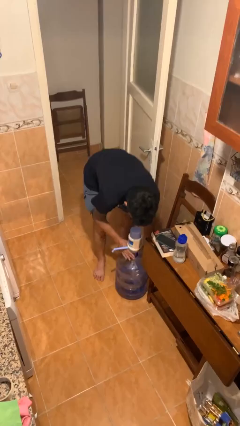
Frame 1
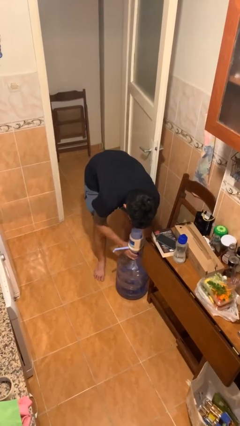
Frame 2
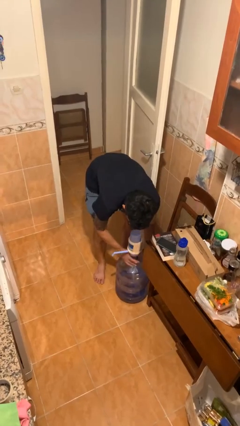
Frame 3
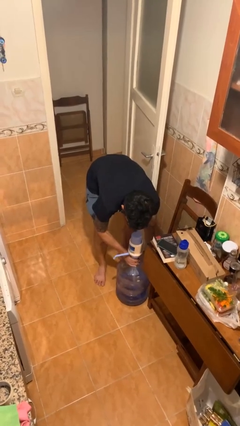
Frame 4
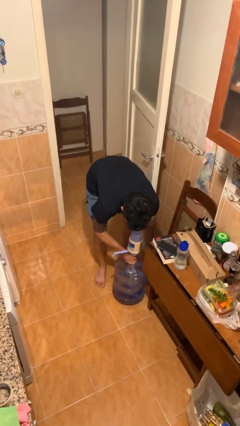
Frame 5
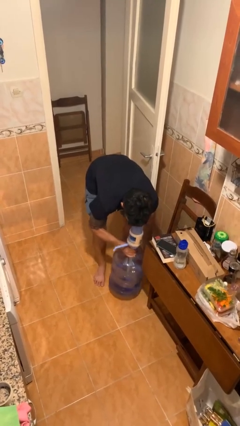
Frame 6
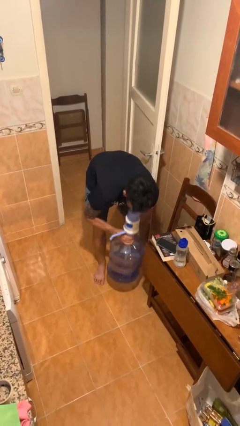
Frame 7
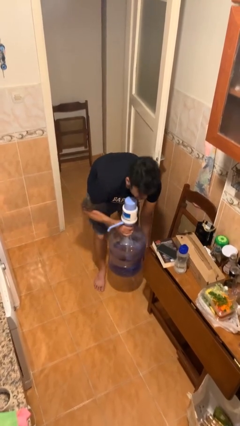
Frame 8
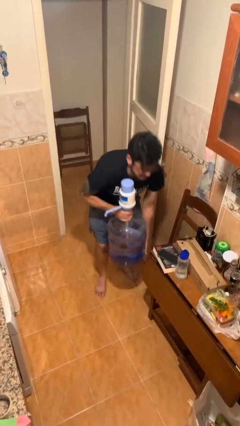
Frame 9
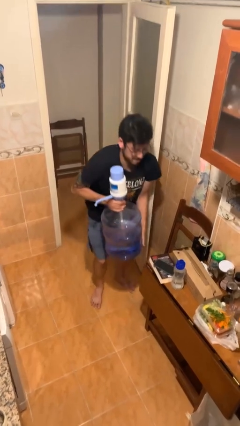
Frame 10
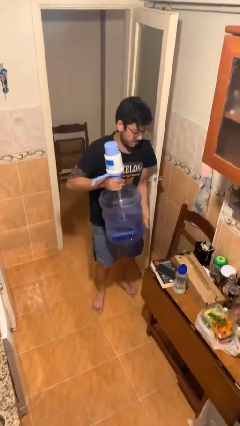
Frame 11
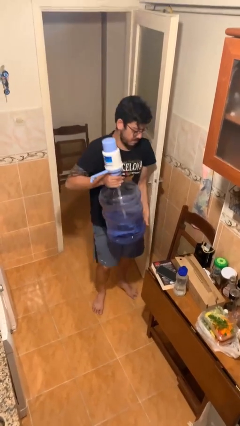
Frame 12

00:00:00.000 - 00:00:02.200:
person picks up object from floor

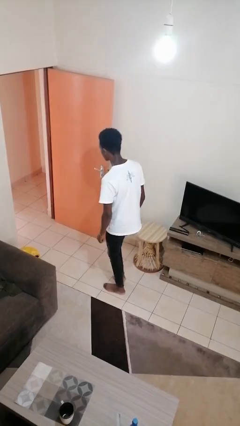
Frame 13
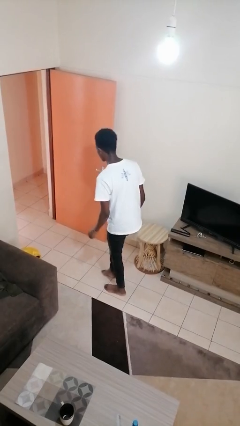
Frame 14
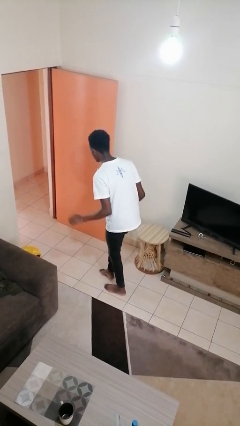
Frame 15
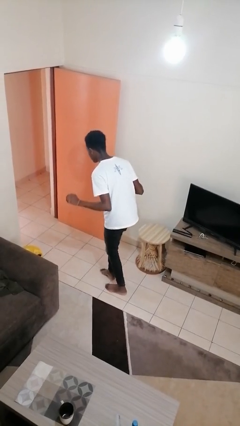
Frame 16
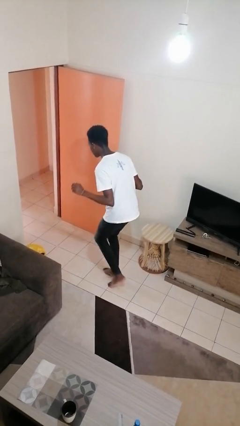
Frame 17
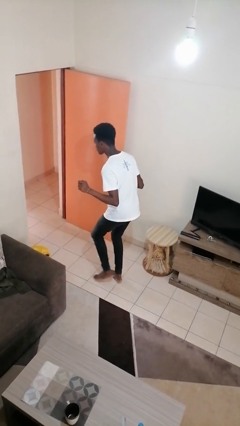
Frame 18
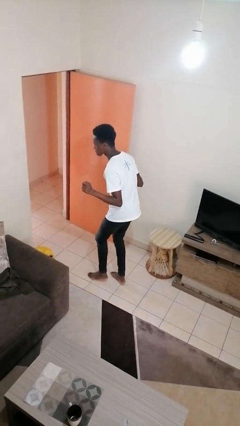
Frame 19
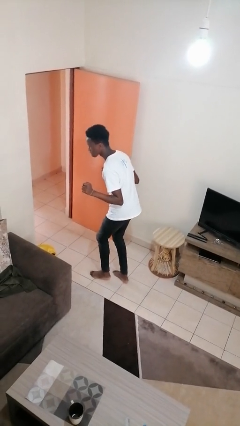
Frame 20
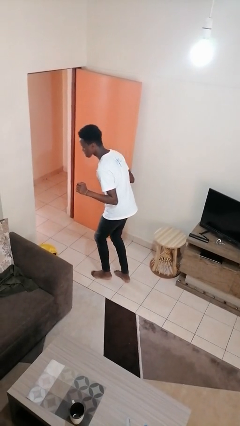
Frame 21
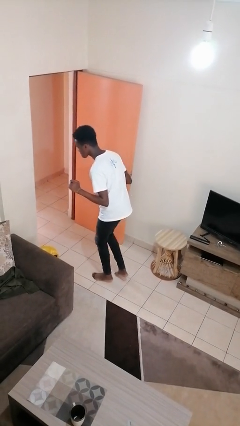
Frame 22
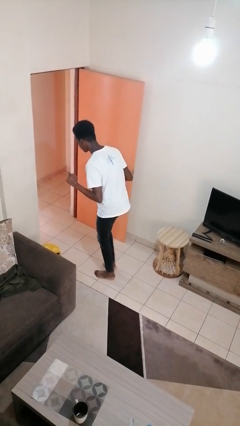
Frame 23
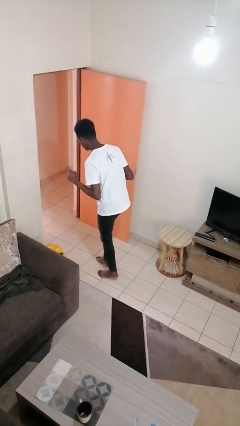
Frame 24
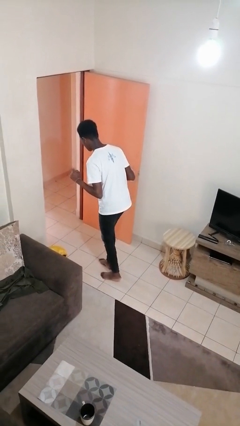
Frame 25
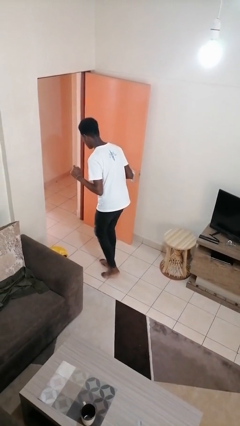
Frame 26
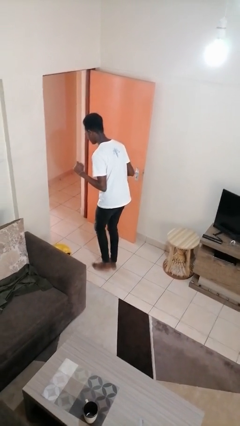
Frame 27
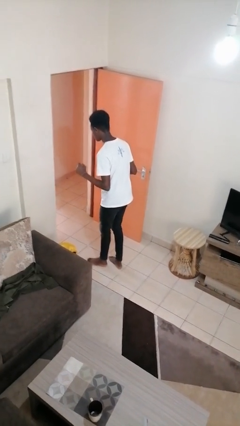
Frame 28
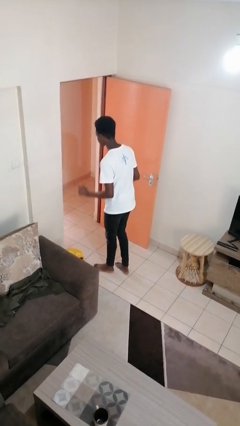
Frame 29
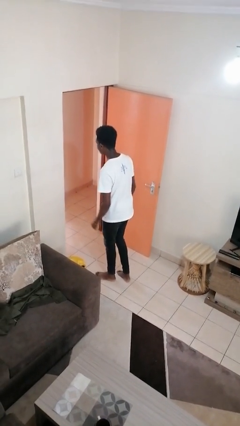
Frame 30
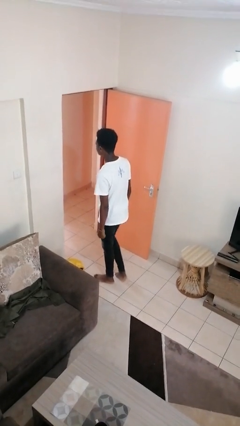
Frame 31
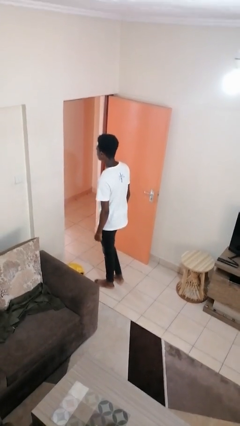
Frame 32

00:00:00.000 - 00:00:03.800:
person walks tiptoe

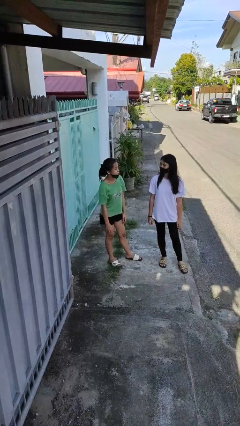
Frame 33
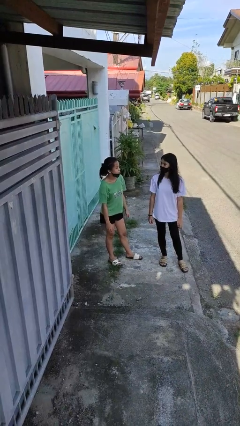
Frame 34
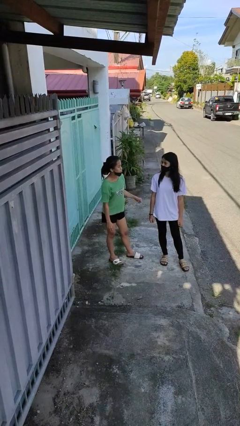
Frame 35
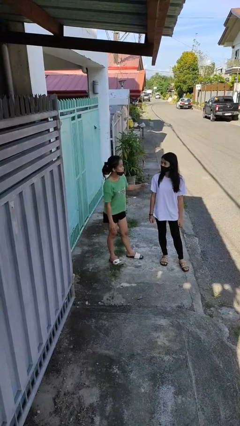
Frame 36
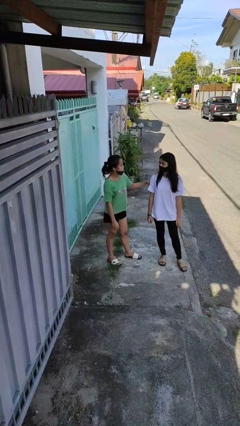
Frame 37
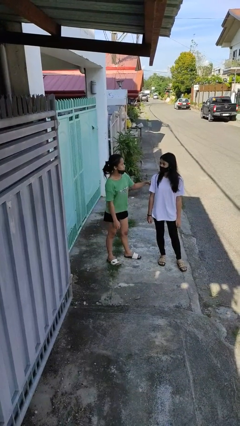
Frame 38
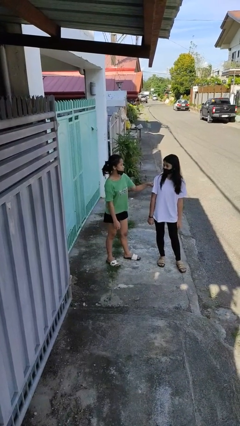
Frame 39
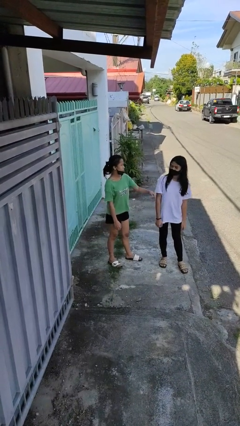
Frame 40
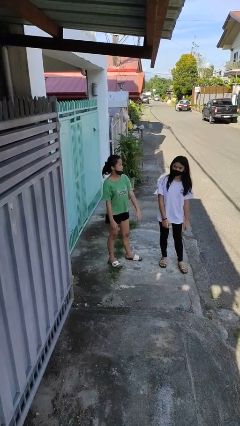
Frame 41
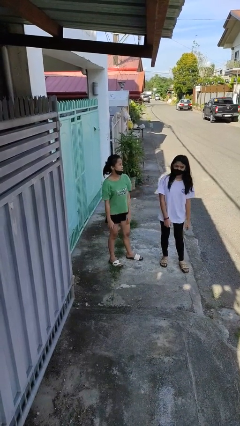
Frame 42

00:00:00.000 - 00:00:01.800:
person pounds shoulders of person

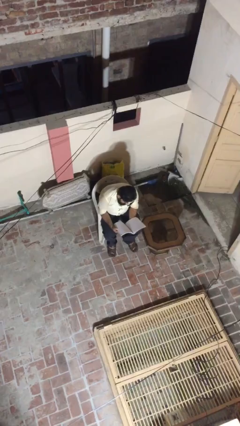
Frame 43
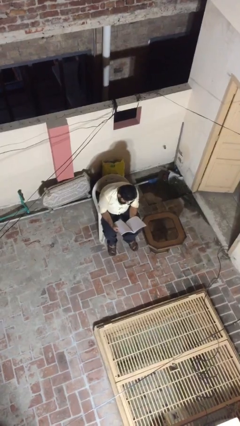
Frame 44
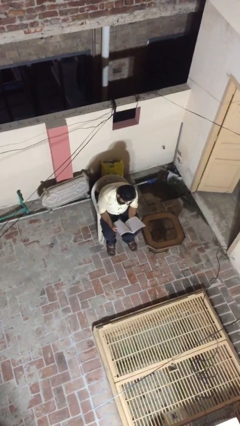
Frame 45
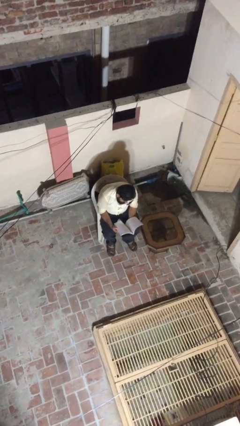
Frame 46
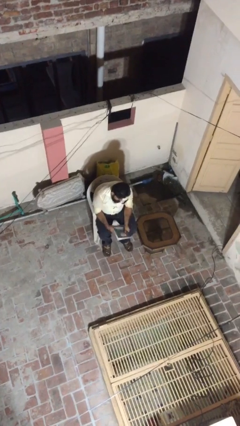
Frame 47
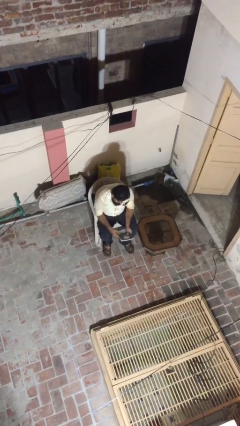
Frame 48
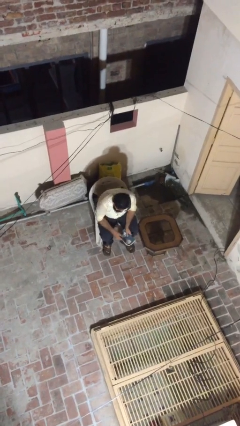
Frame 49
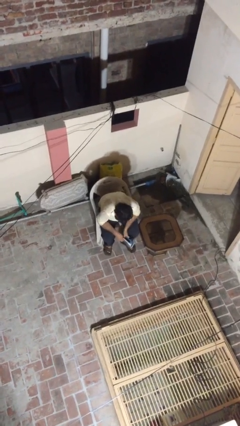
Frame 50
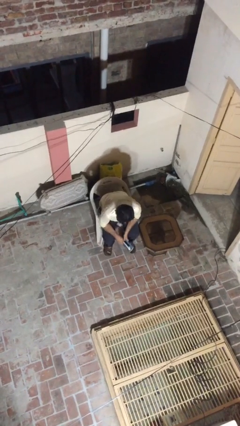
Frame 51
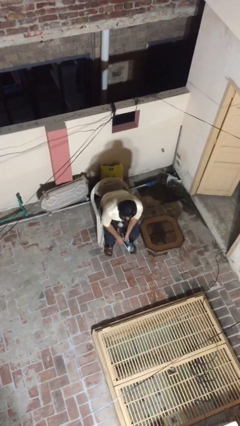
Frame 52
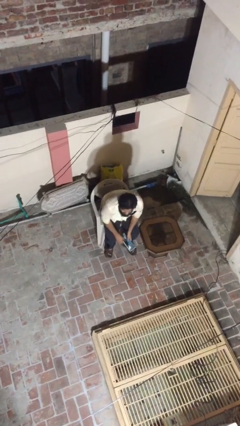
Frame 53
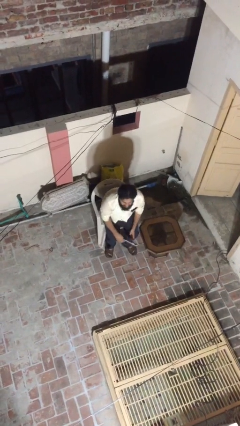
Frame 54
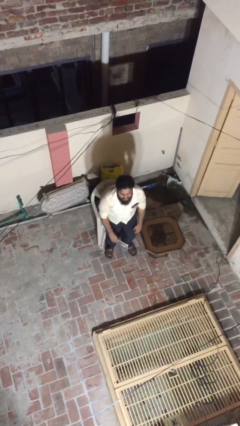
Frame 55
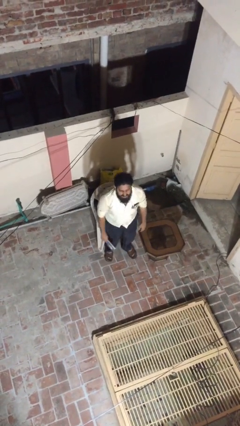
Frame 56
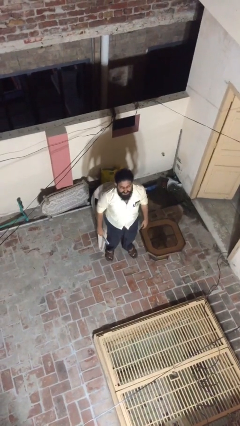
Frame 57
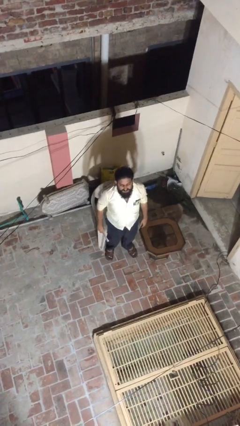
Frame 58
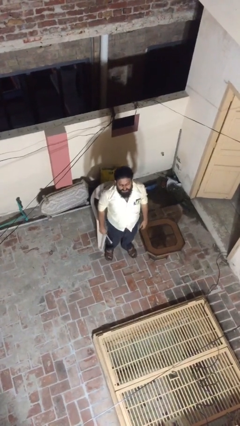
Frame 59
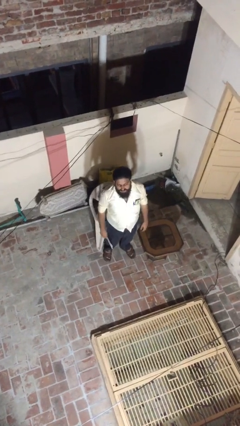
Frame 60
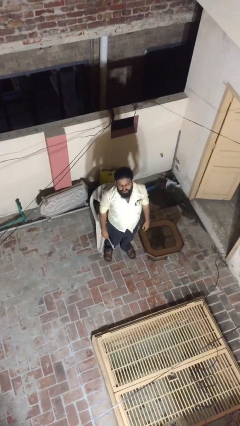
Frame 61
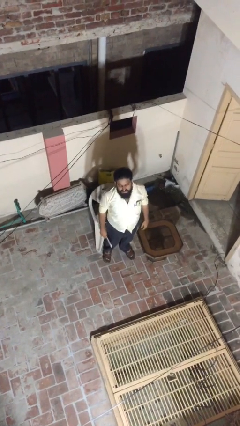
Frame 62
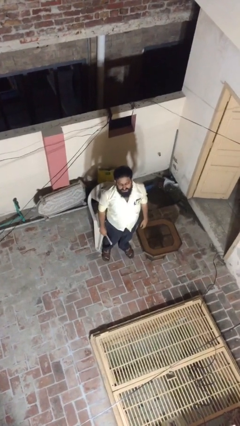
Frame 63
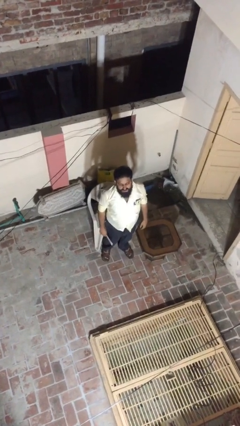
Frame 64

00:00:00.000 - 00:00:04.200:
person stands up

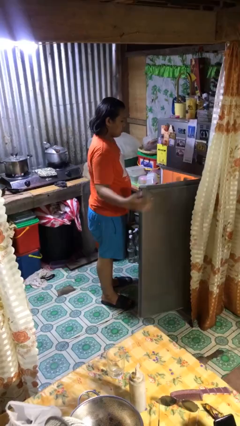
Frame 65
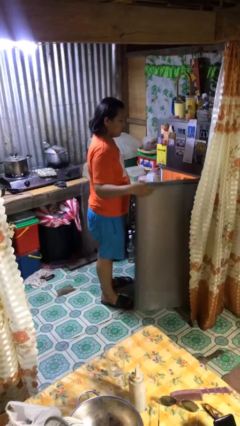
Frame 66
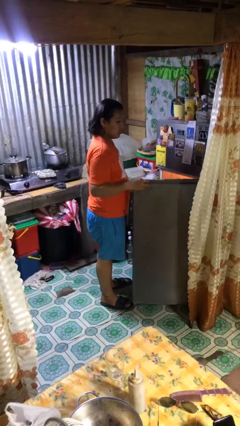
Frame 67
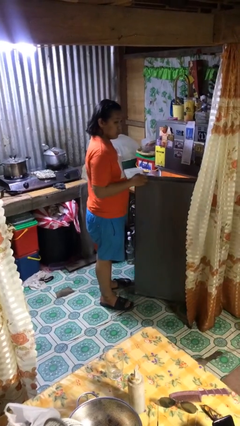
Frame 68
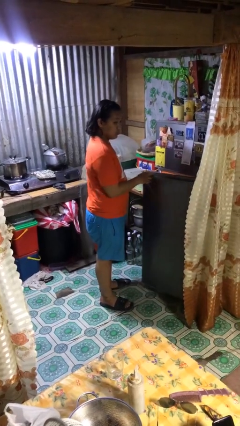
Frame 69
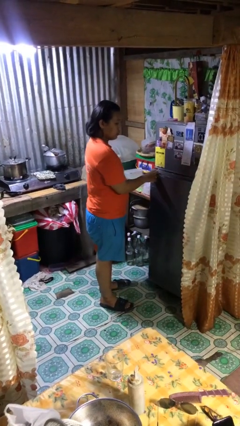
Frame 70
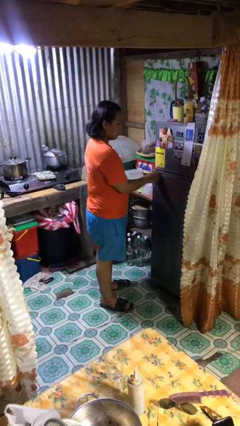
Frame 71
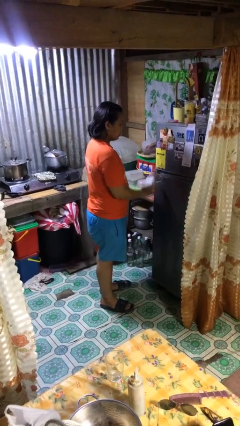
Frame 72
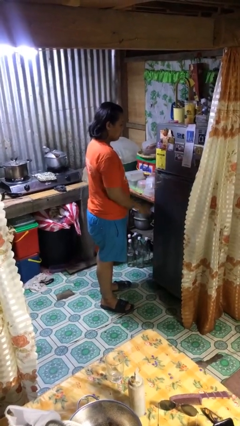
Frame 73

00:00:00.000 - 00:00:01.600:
person closes refrigerator

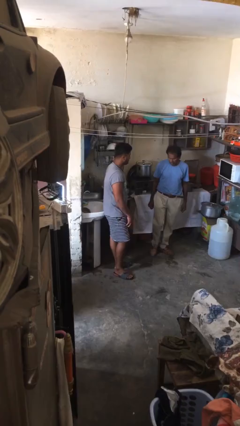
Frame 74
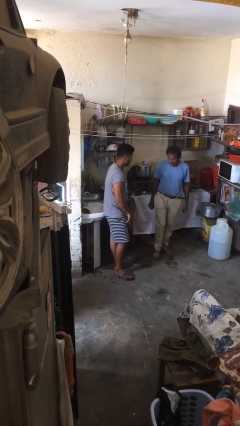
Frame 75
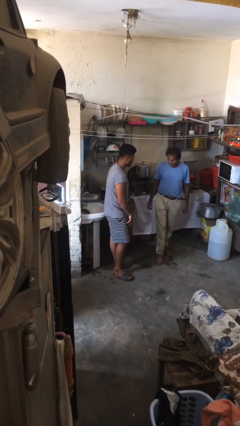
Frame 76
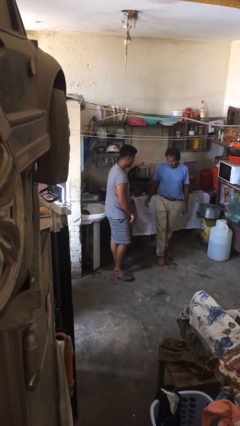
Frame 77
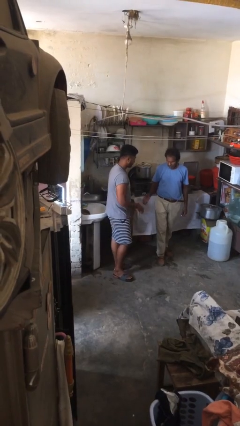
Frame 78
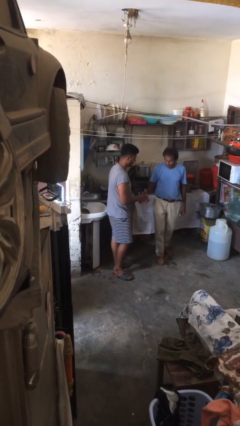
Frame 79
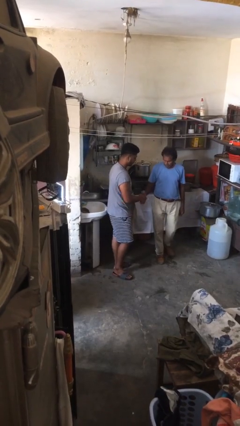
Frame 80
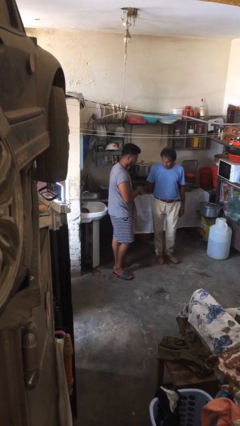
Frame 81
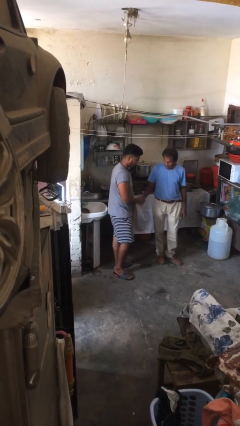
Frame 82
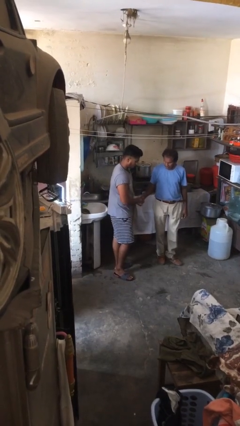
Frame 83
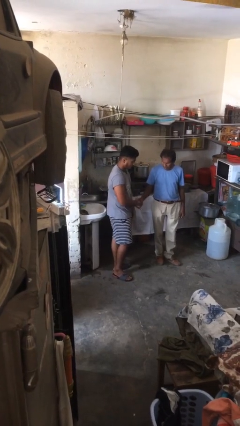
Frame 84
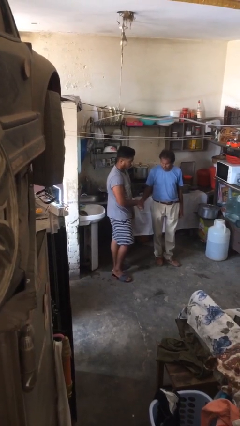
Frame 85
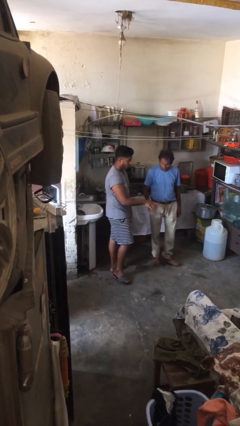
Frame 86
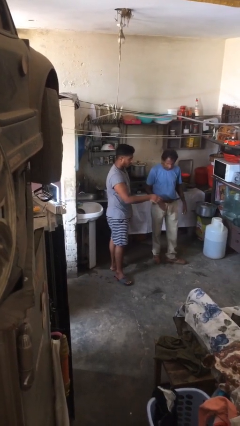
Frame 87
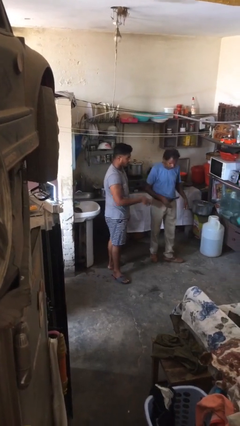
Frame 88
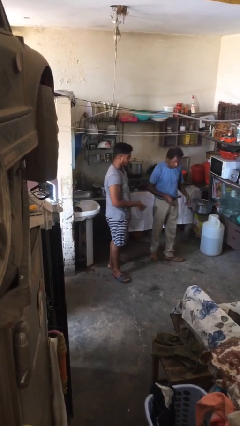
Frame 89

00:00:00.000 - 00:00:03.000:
person shakes hand

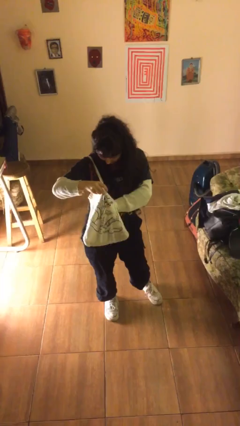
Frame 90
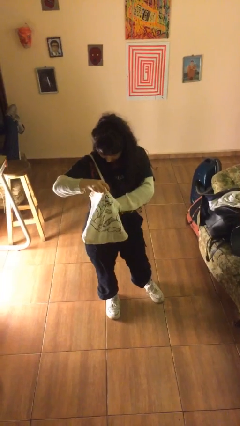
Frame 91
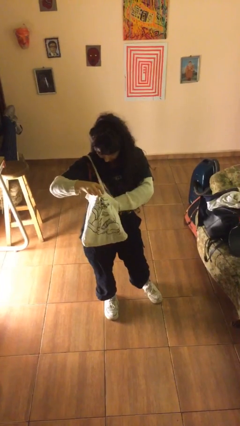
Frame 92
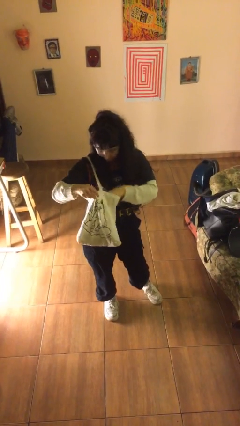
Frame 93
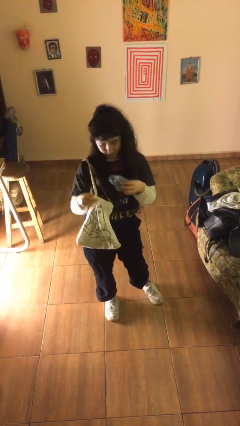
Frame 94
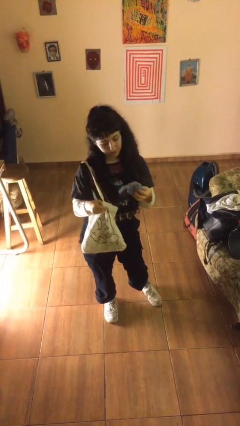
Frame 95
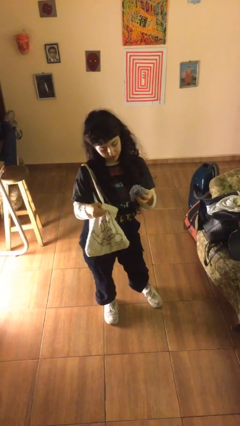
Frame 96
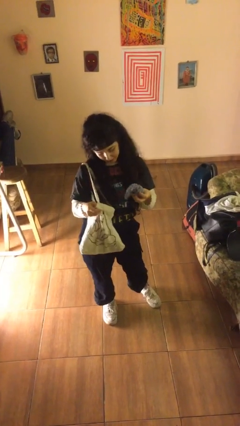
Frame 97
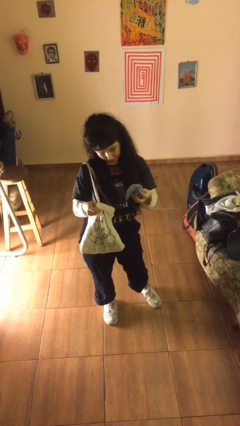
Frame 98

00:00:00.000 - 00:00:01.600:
person takes object from purse
